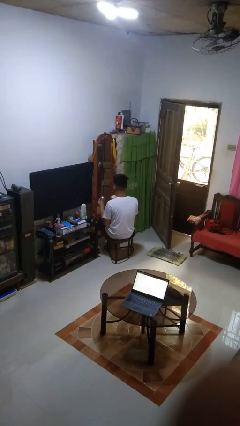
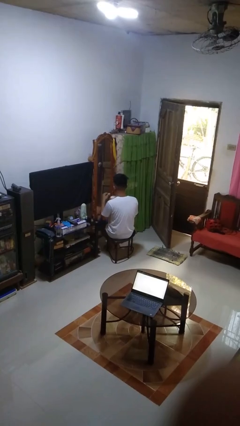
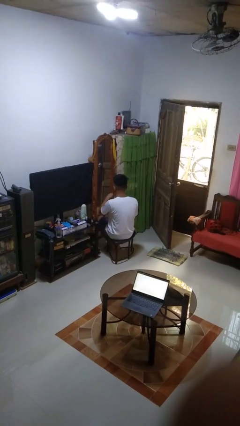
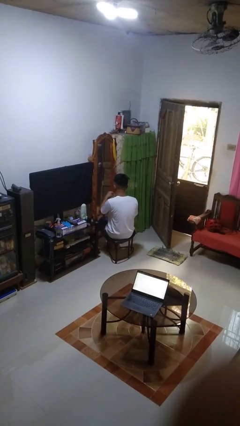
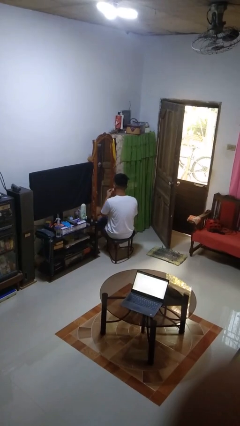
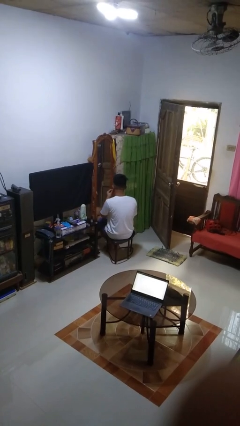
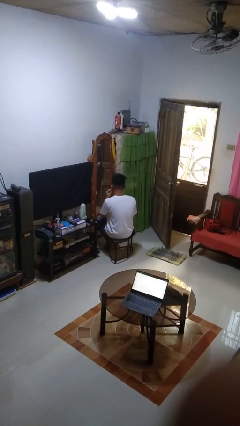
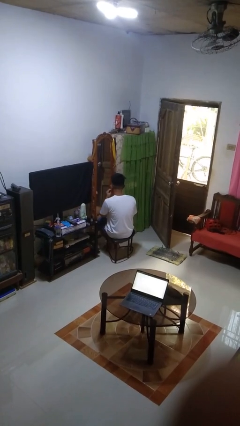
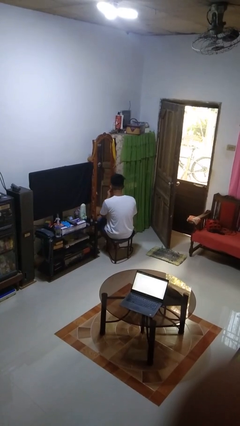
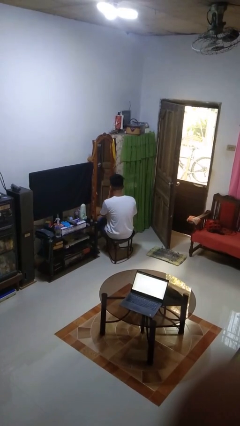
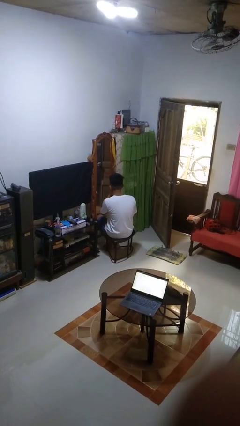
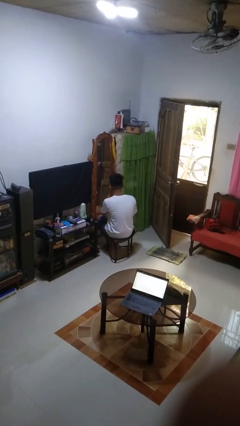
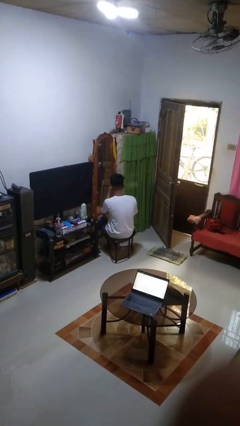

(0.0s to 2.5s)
person applies foundation makeup

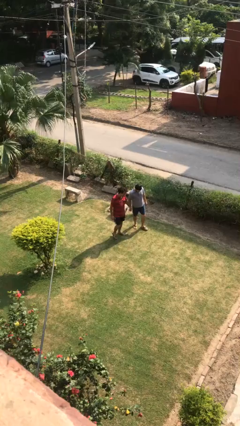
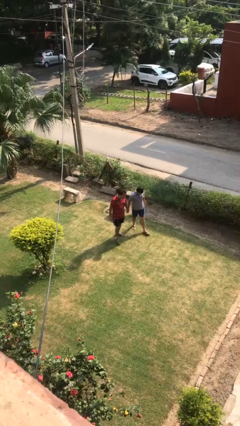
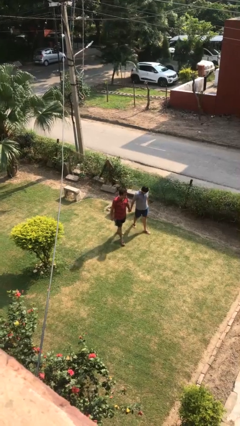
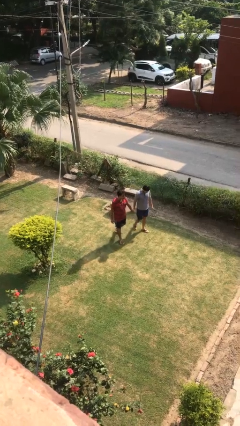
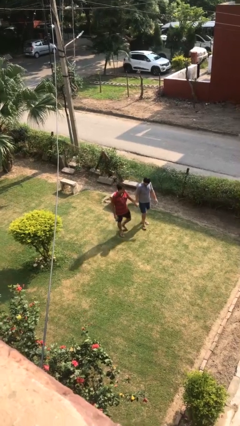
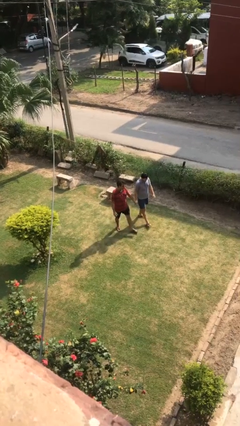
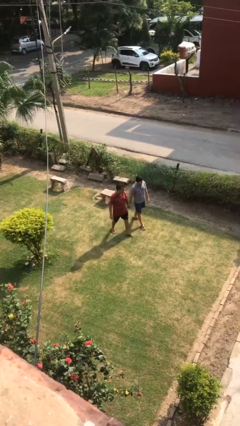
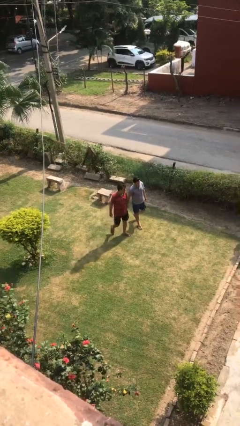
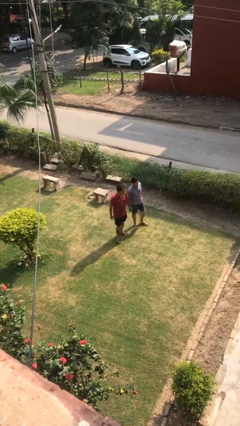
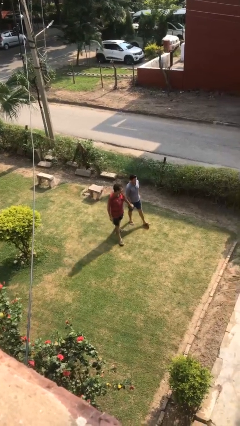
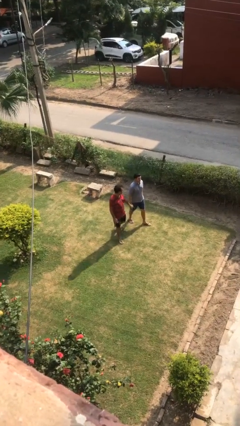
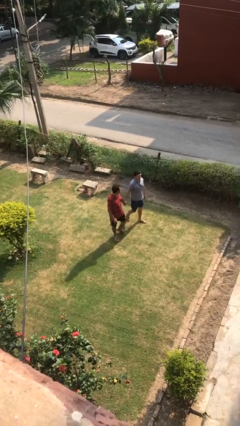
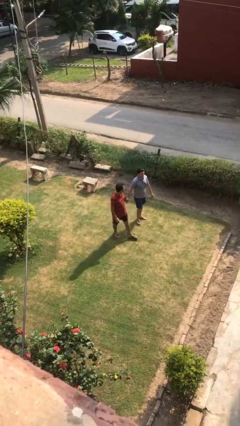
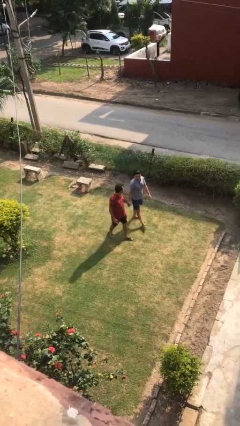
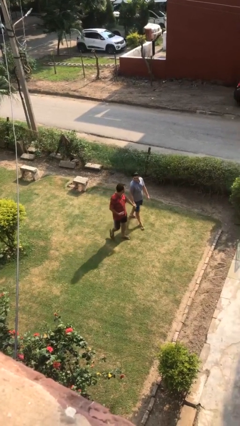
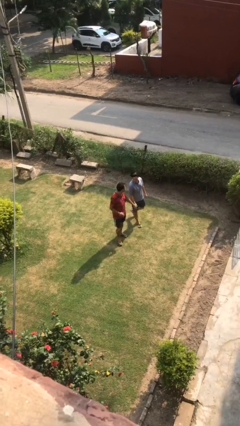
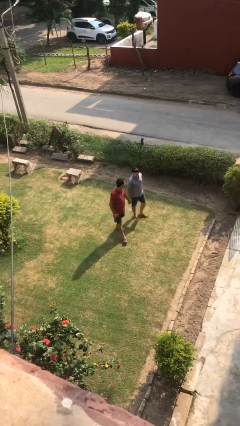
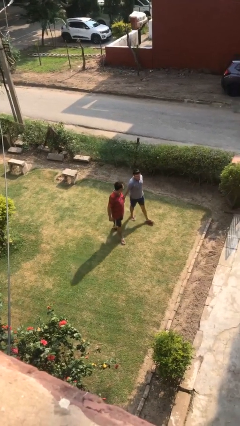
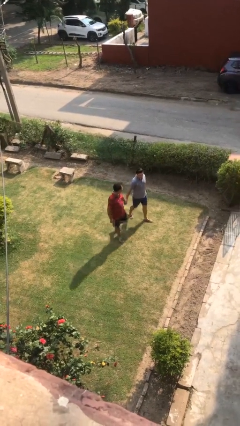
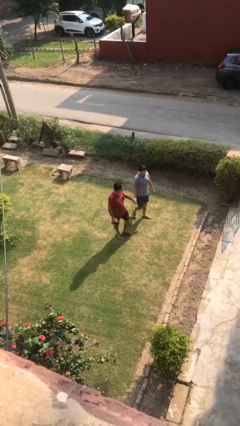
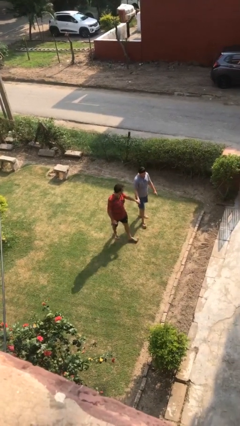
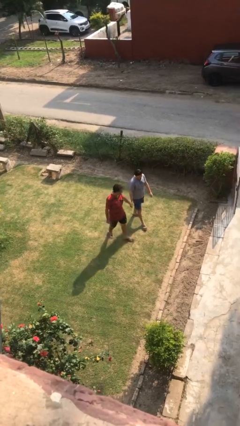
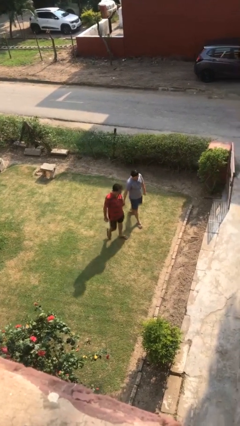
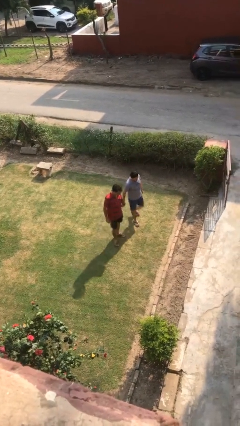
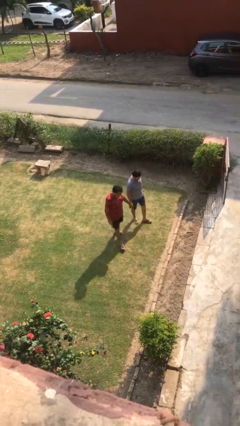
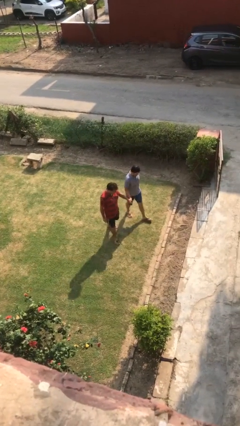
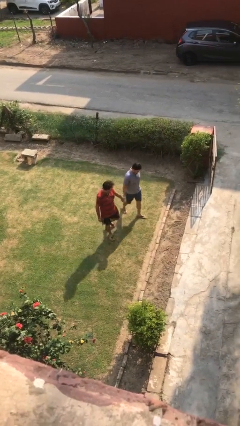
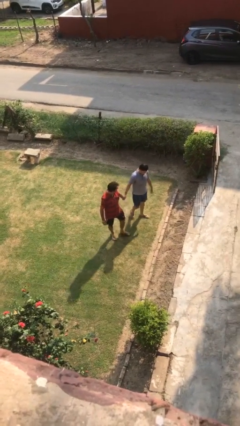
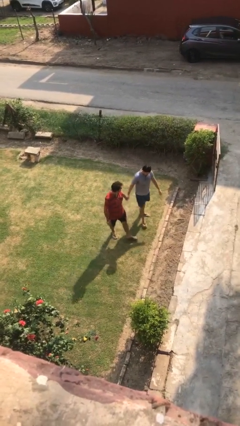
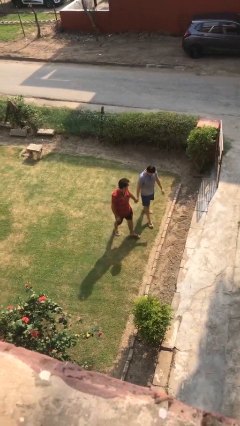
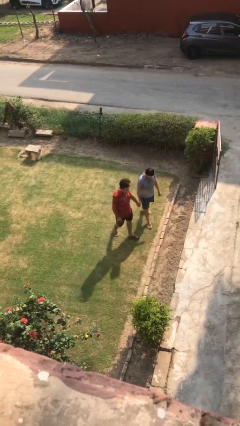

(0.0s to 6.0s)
person holds hand

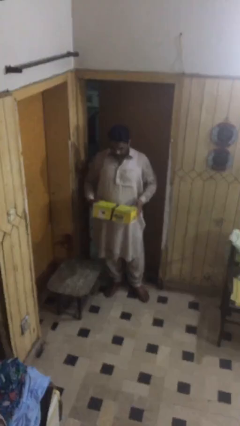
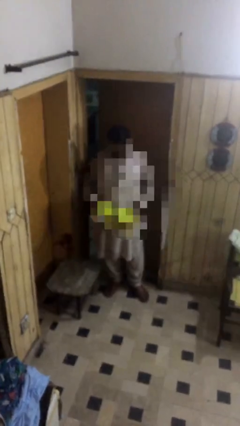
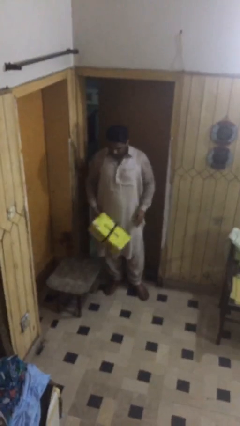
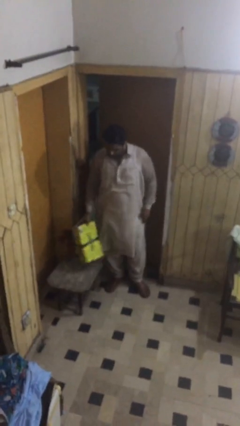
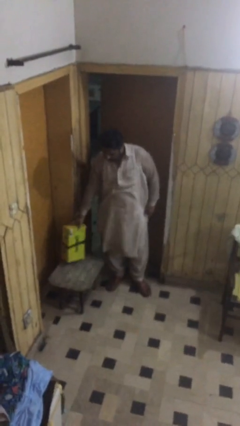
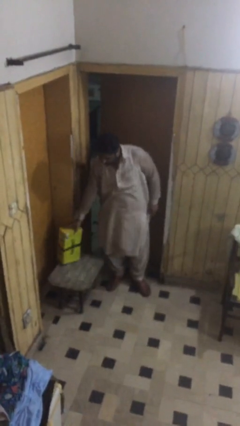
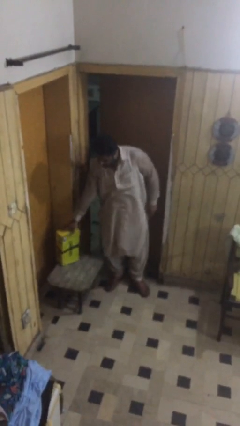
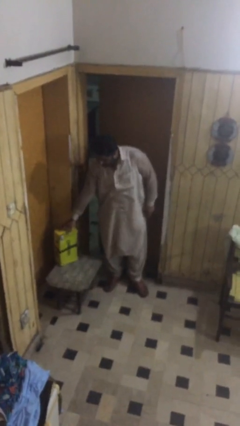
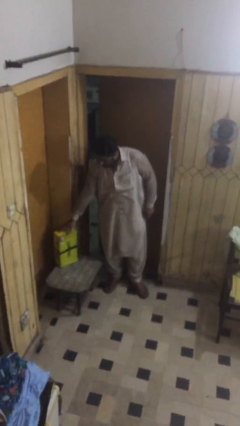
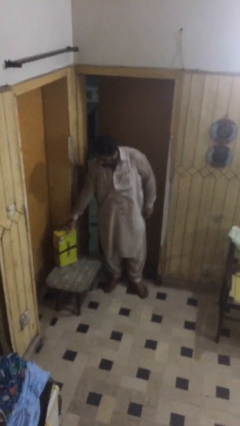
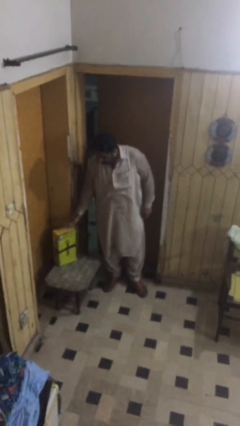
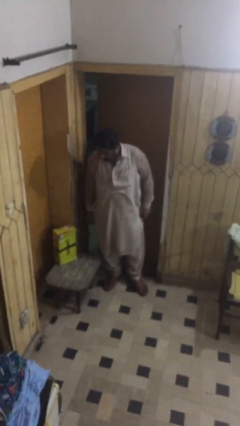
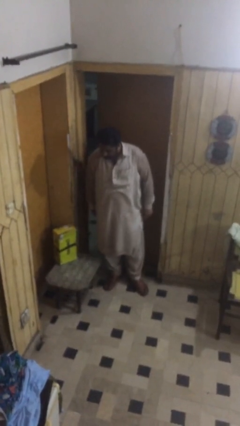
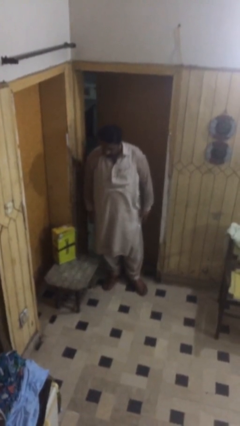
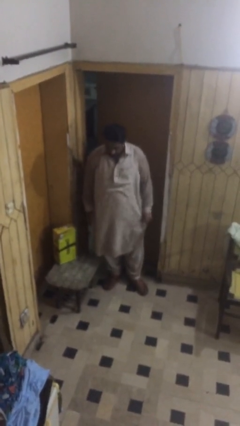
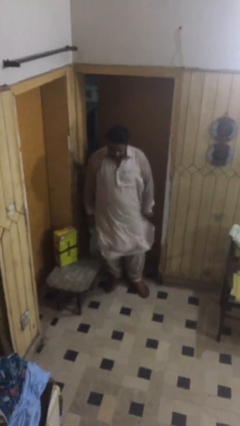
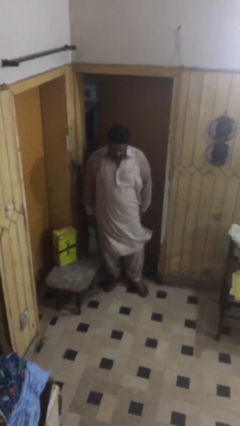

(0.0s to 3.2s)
person puts down object on table

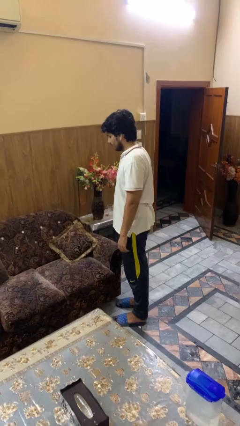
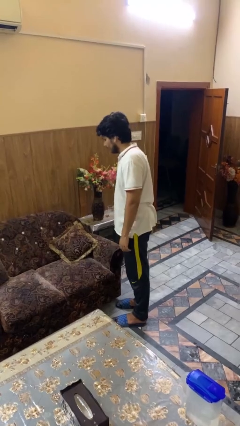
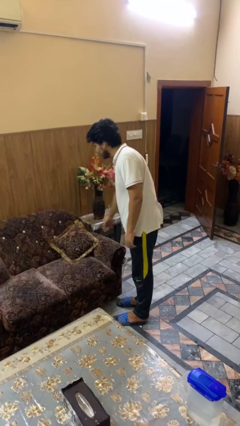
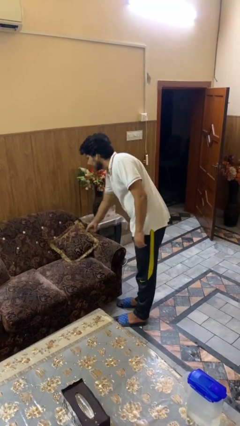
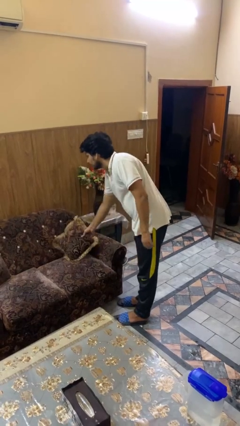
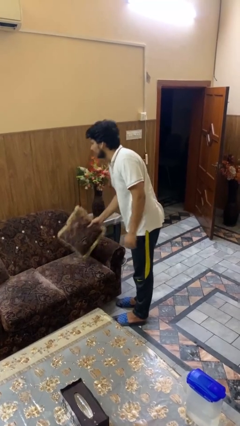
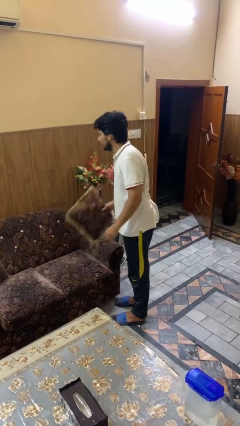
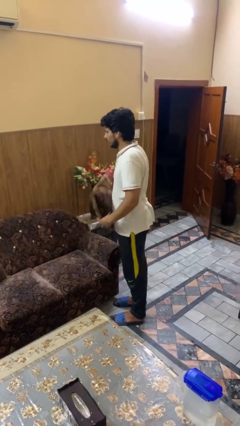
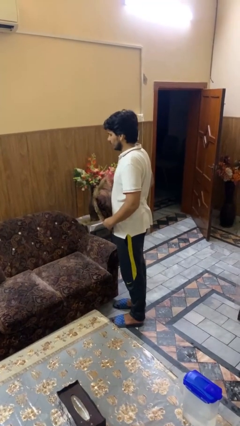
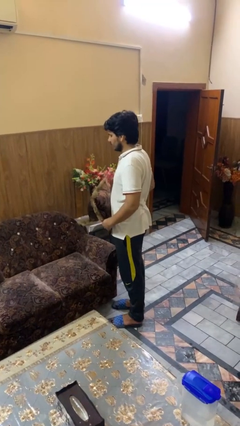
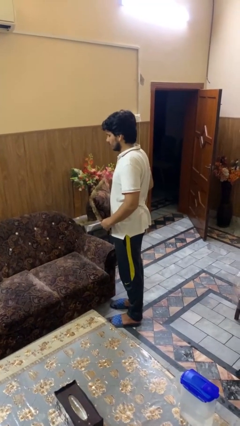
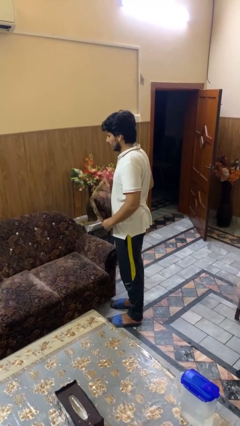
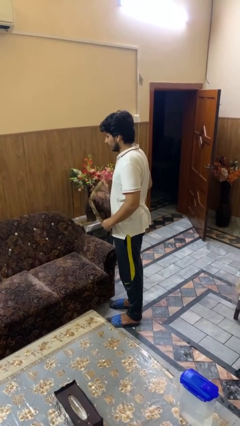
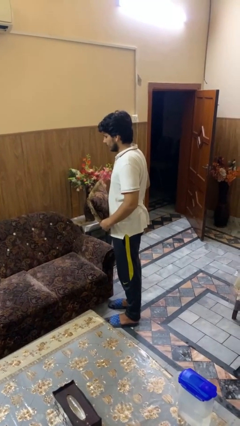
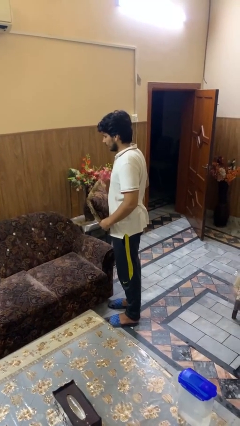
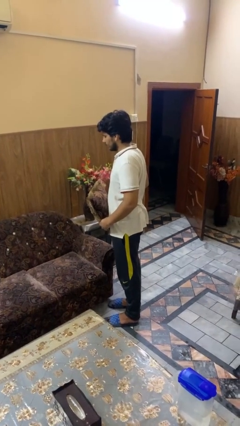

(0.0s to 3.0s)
person picks up object from couch

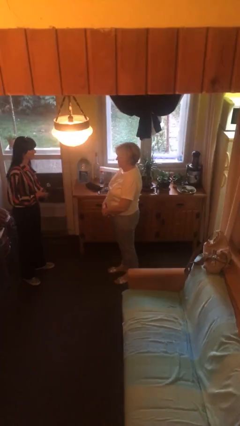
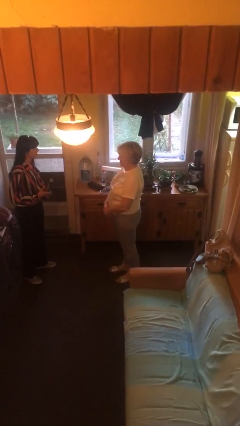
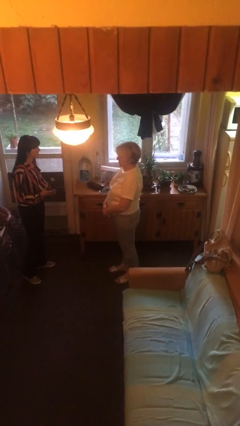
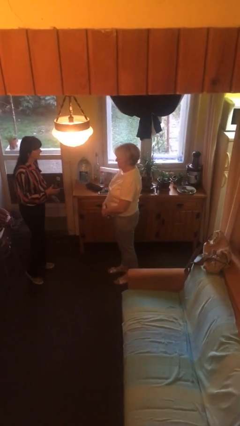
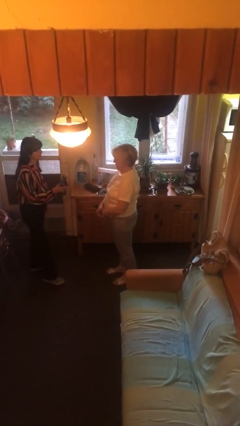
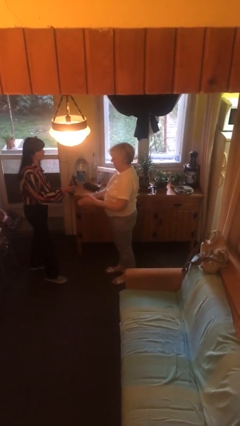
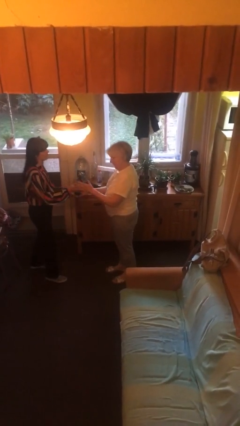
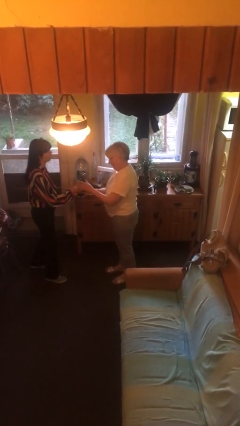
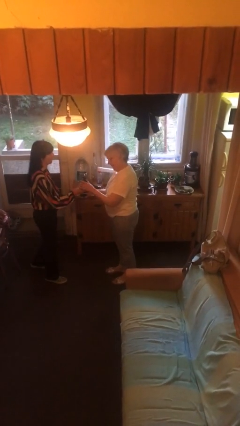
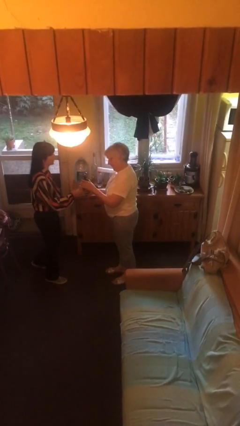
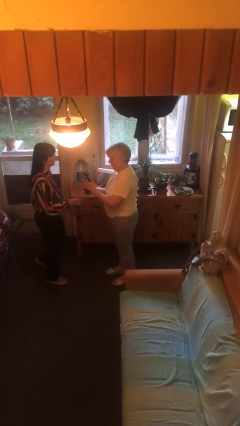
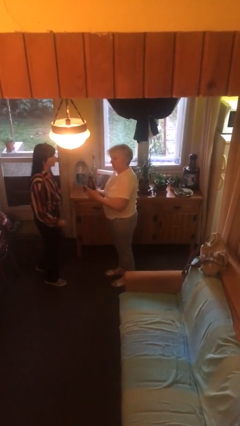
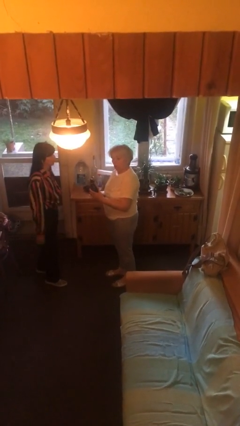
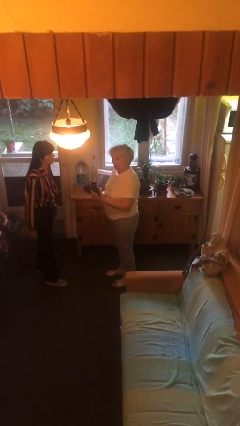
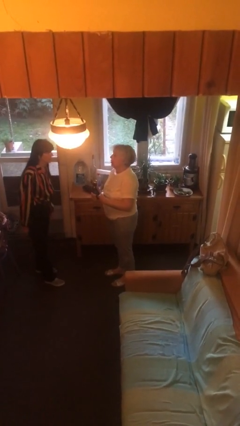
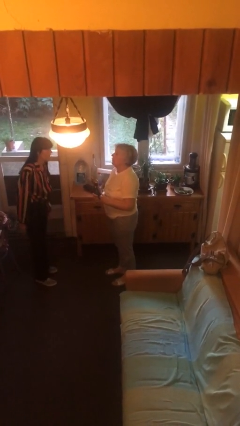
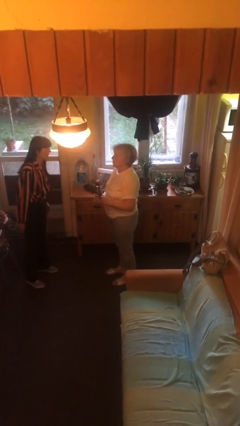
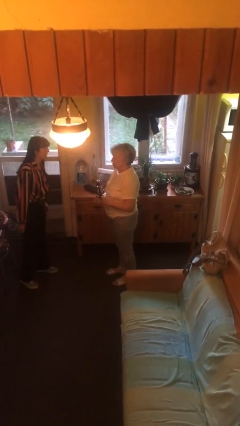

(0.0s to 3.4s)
person transfers object to person
